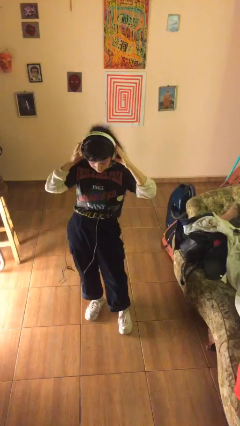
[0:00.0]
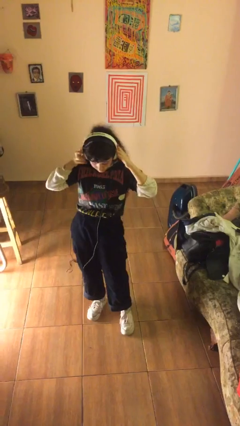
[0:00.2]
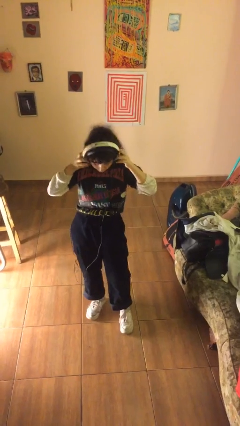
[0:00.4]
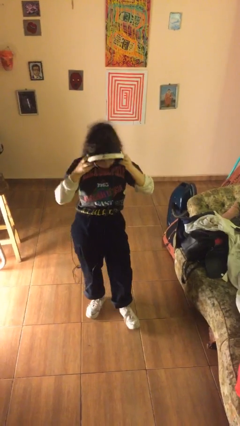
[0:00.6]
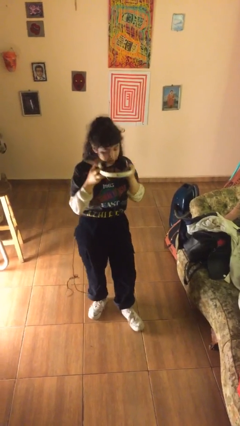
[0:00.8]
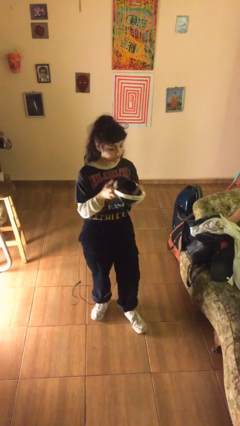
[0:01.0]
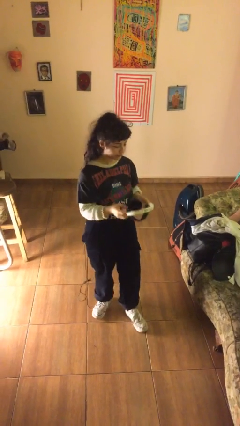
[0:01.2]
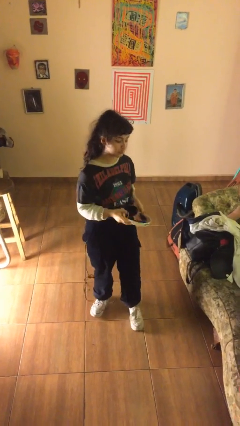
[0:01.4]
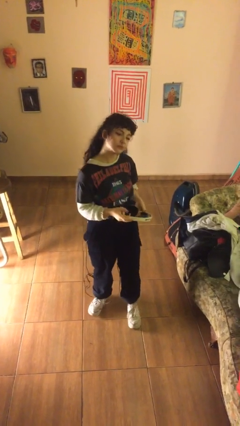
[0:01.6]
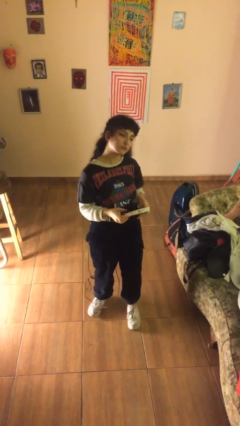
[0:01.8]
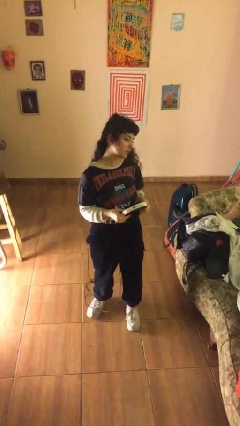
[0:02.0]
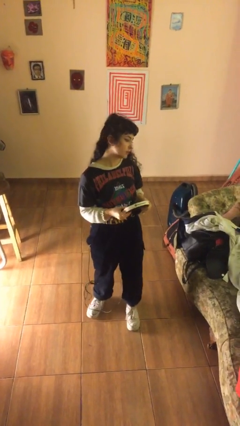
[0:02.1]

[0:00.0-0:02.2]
person takes off headphones

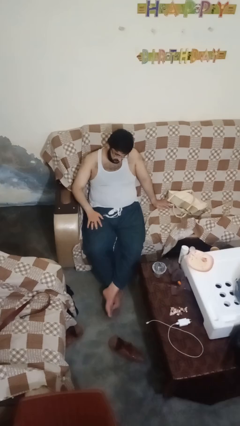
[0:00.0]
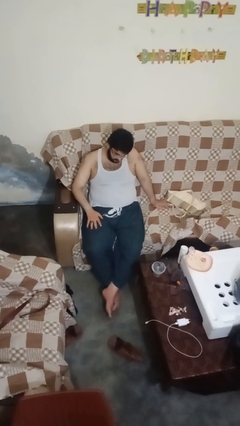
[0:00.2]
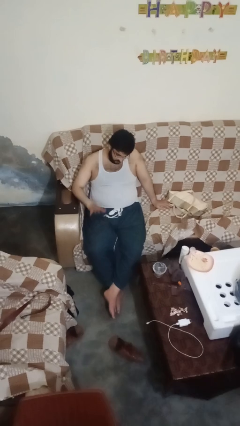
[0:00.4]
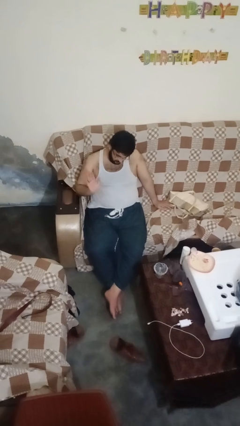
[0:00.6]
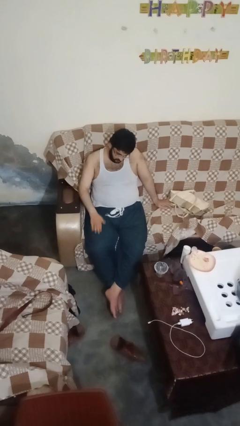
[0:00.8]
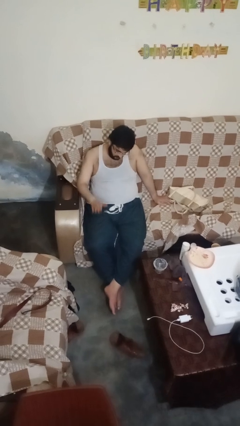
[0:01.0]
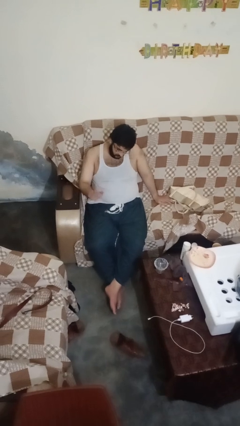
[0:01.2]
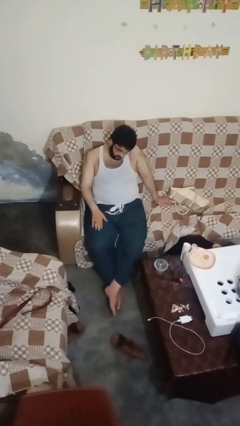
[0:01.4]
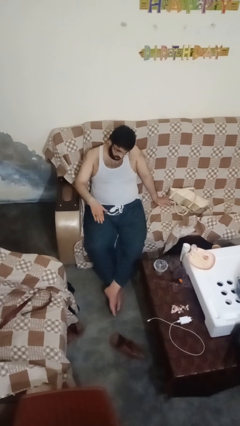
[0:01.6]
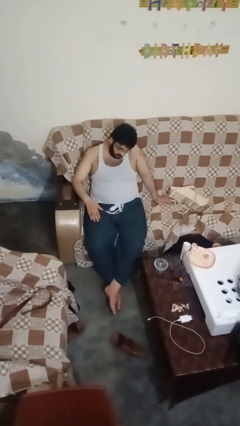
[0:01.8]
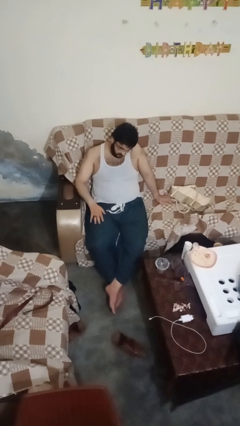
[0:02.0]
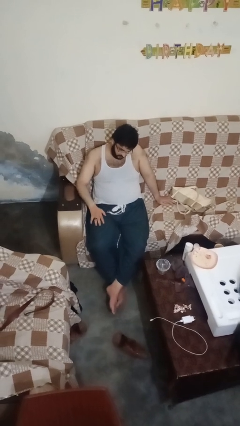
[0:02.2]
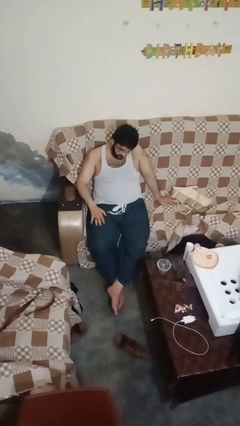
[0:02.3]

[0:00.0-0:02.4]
person slaps hands on thighs

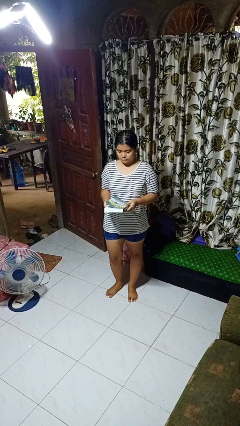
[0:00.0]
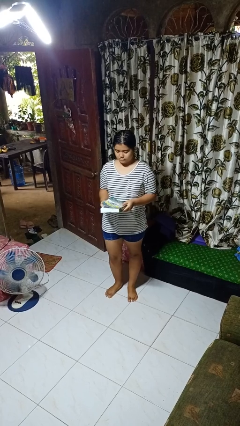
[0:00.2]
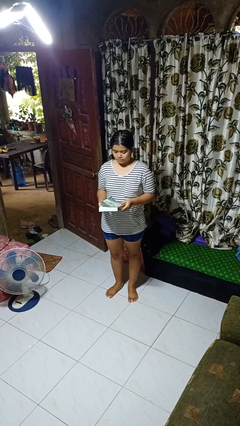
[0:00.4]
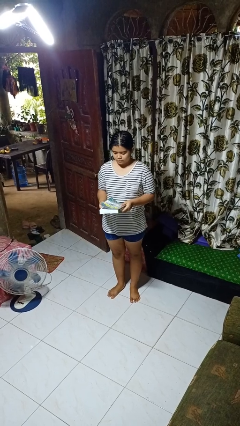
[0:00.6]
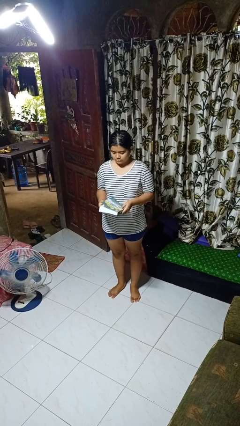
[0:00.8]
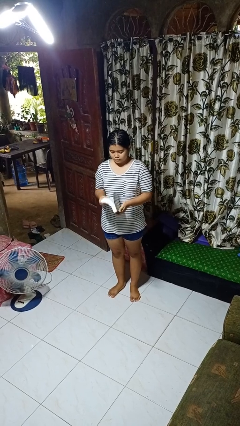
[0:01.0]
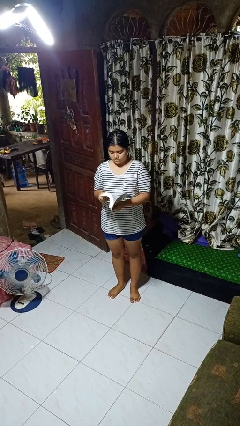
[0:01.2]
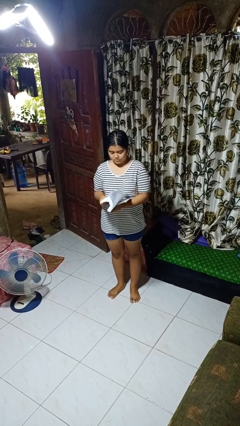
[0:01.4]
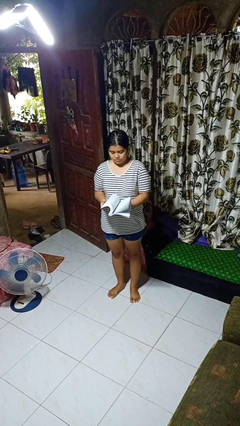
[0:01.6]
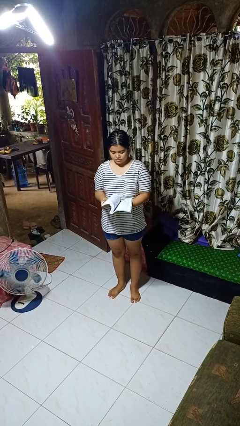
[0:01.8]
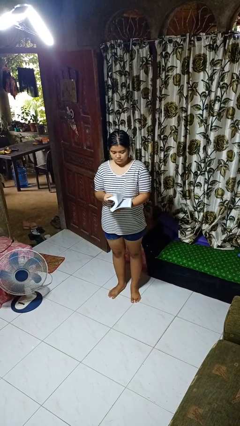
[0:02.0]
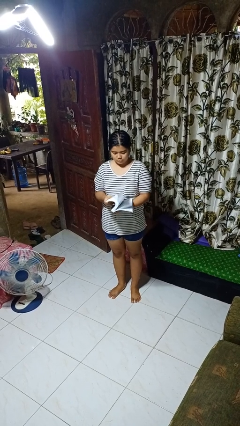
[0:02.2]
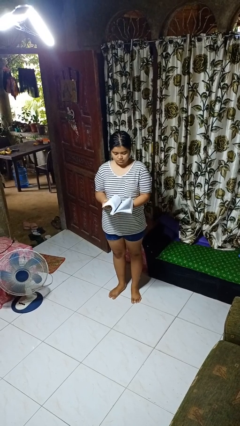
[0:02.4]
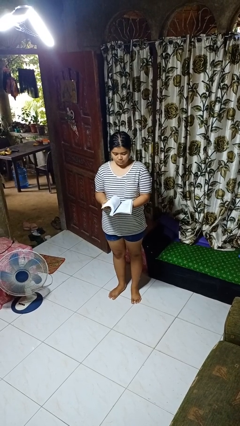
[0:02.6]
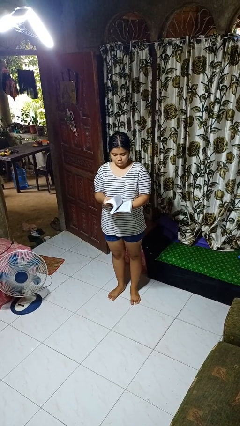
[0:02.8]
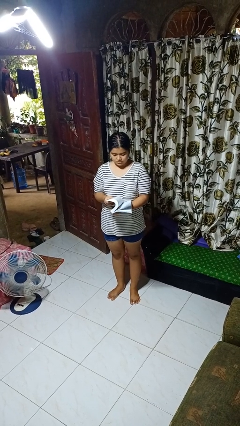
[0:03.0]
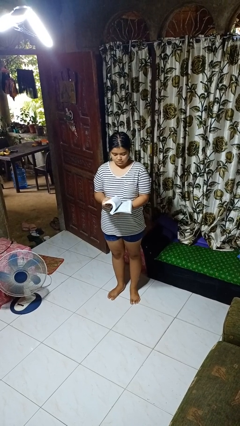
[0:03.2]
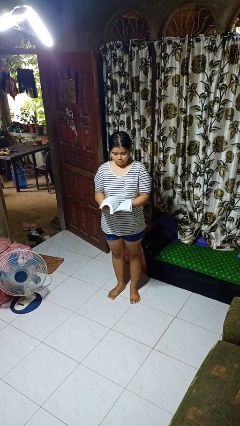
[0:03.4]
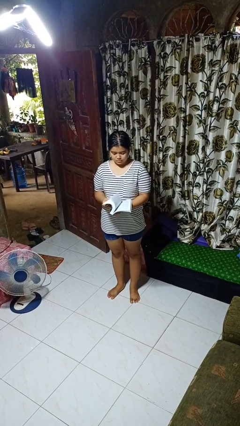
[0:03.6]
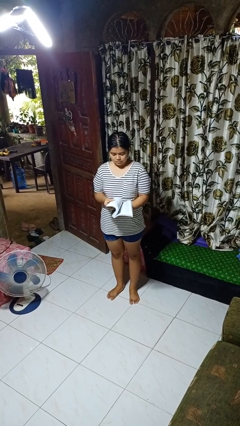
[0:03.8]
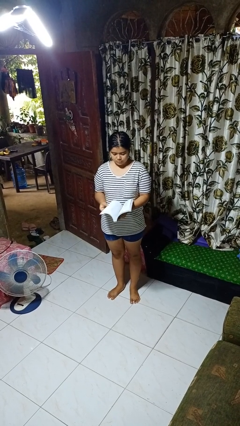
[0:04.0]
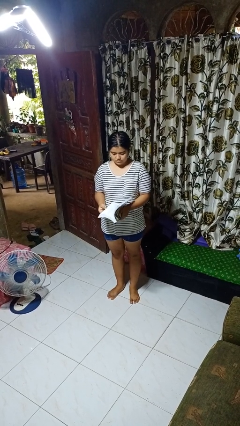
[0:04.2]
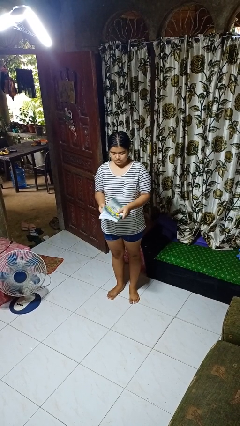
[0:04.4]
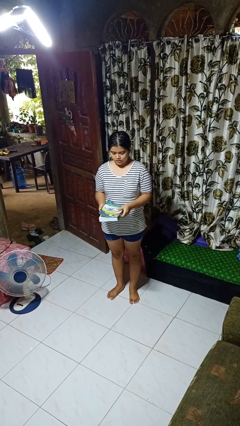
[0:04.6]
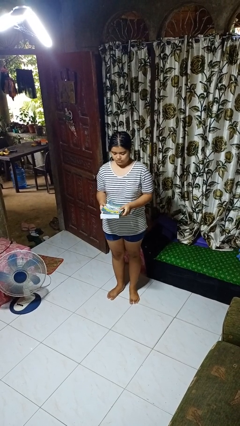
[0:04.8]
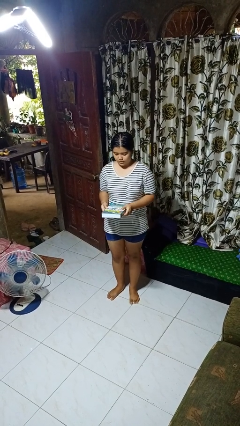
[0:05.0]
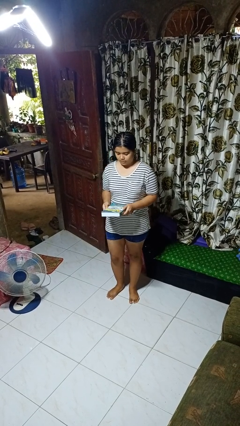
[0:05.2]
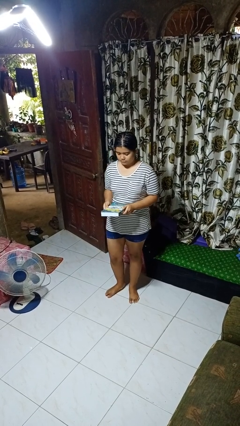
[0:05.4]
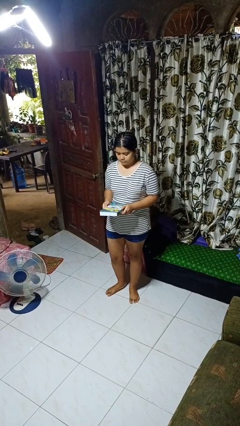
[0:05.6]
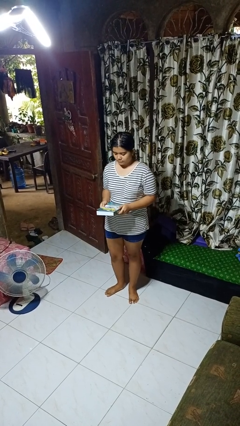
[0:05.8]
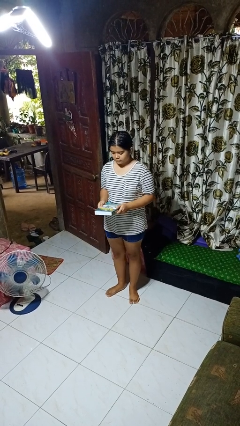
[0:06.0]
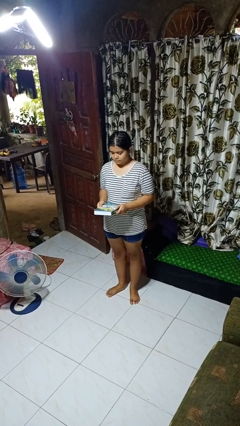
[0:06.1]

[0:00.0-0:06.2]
person reads book

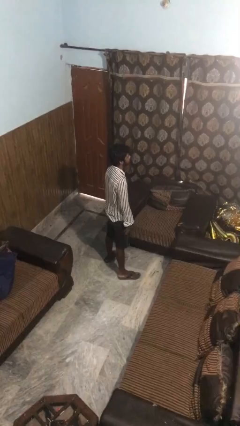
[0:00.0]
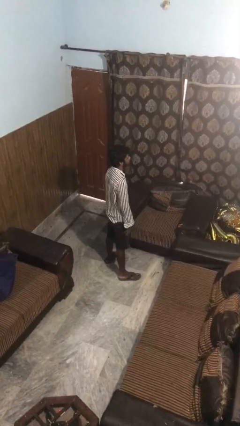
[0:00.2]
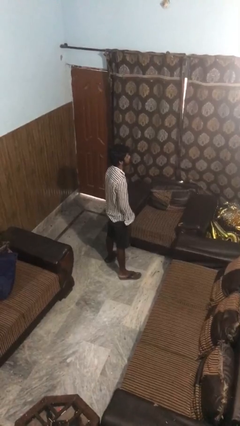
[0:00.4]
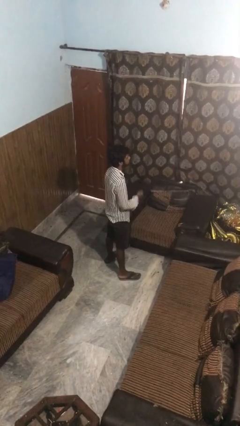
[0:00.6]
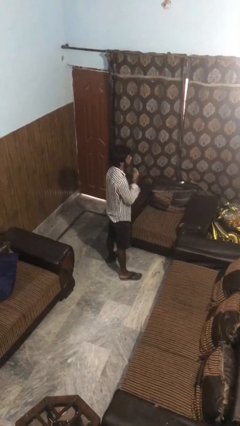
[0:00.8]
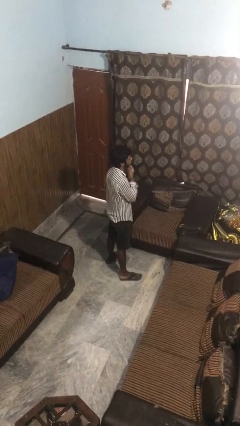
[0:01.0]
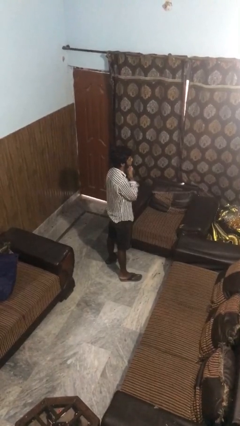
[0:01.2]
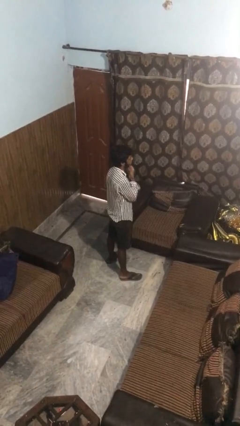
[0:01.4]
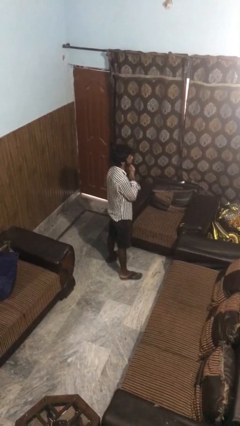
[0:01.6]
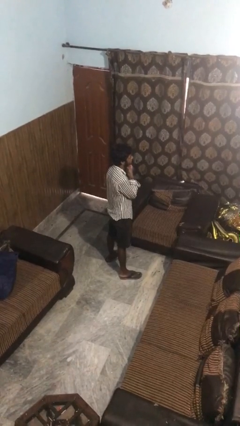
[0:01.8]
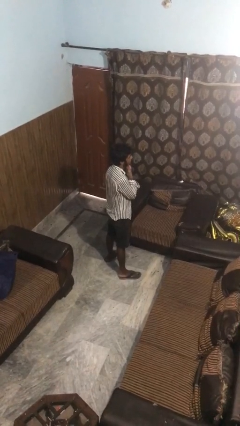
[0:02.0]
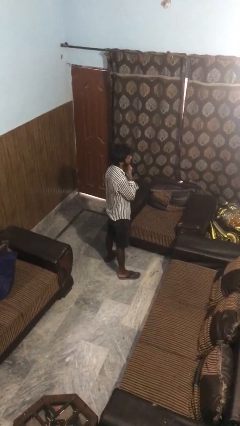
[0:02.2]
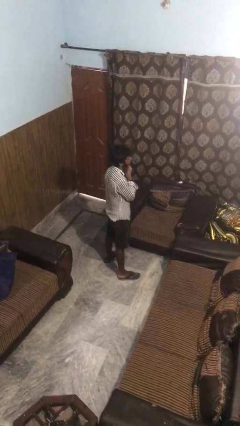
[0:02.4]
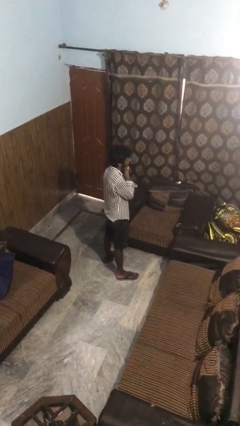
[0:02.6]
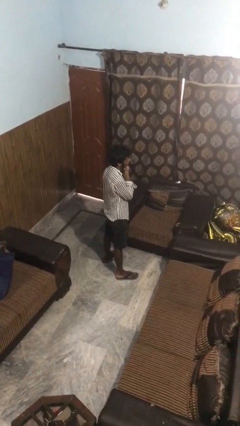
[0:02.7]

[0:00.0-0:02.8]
person strokes chin

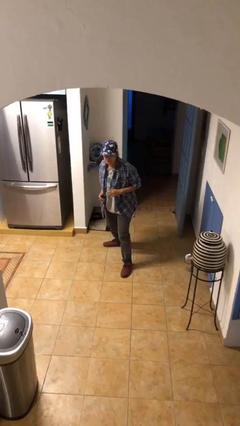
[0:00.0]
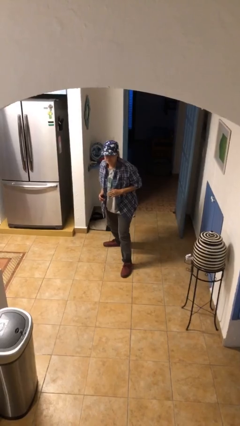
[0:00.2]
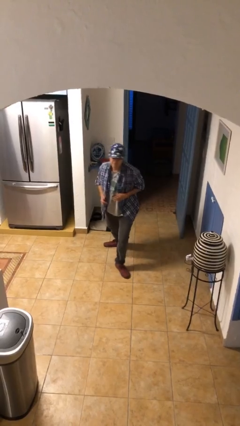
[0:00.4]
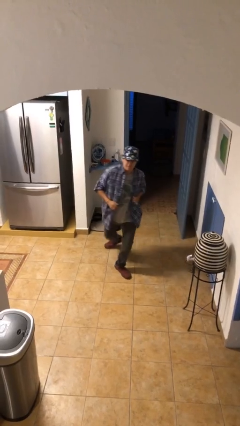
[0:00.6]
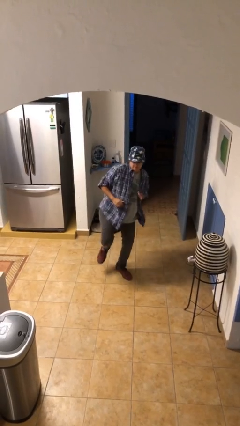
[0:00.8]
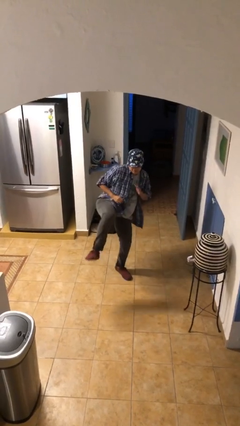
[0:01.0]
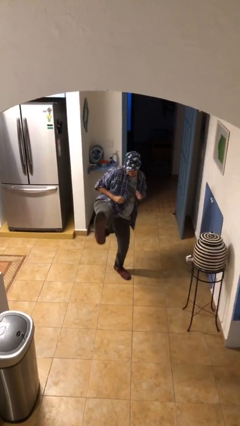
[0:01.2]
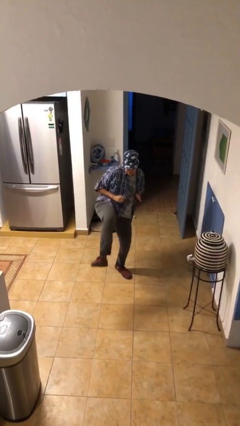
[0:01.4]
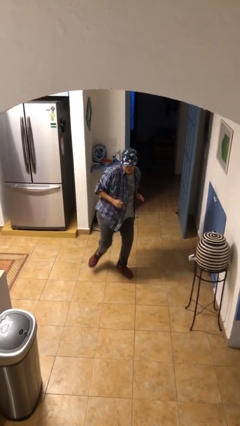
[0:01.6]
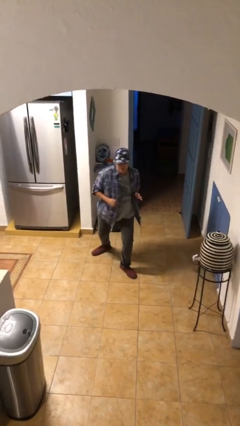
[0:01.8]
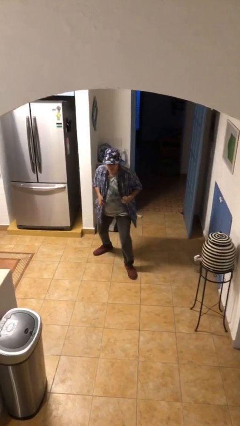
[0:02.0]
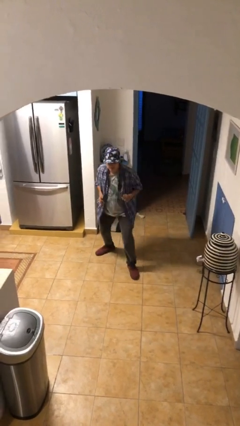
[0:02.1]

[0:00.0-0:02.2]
person karate kicks

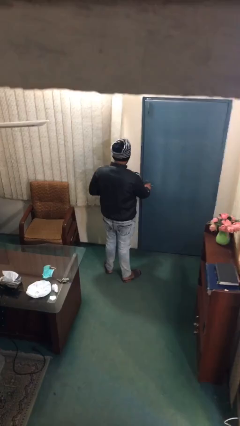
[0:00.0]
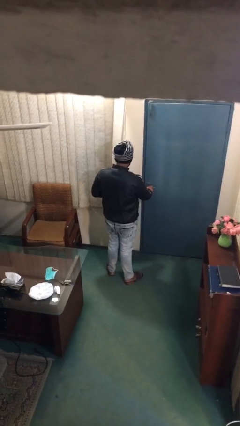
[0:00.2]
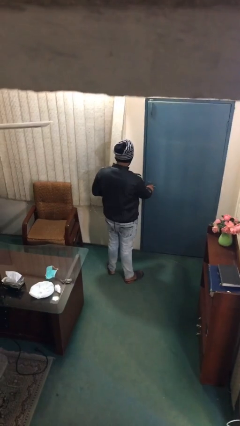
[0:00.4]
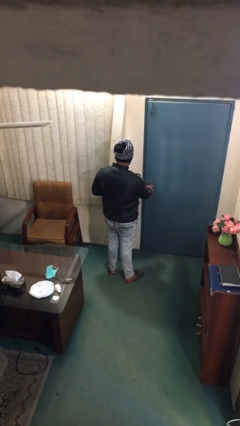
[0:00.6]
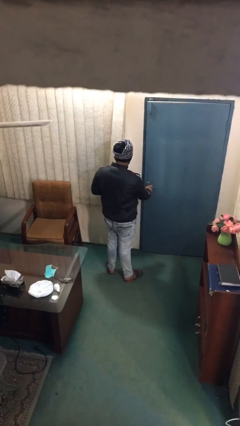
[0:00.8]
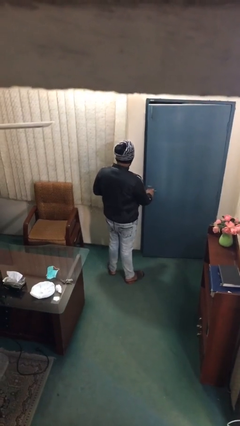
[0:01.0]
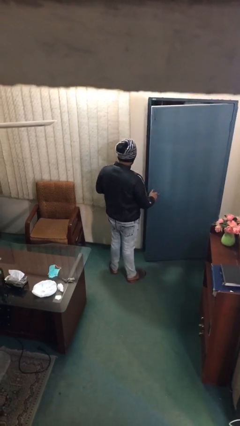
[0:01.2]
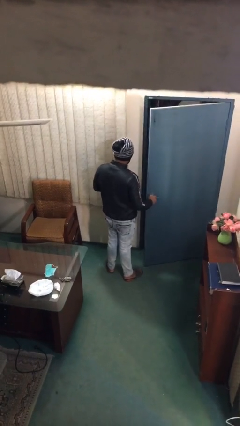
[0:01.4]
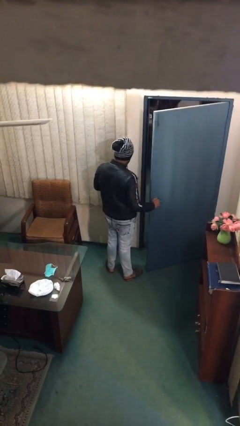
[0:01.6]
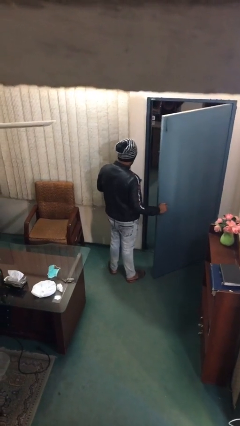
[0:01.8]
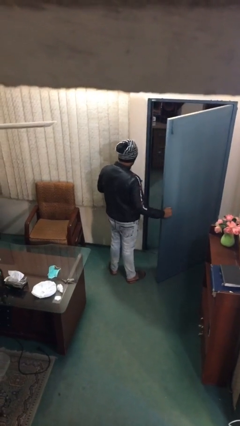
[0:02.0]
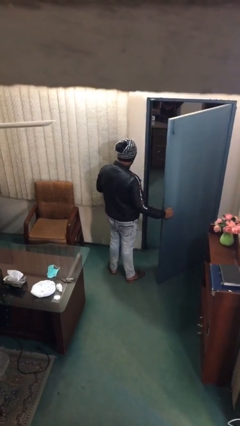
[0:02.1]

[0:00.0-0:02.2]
person opens facility door
